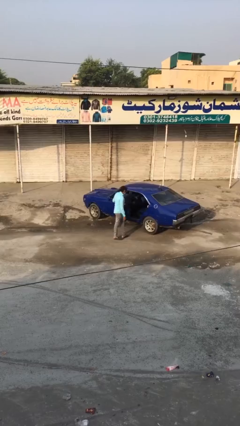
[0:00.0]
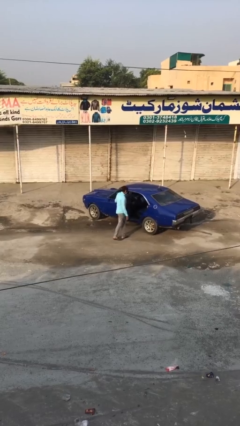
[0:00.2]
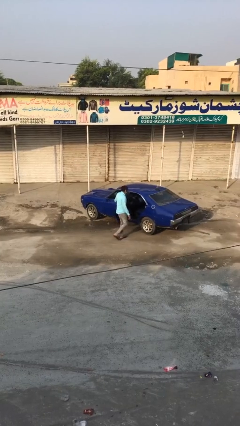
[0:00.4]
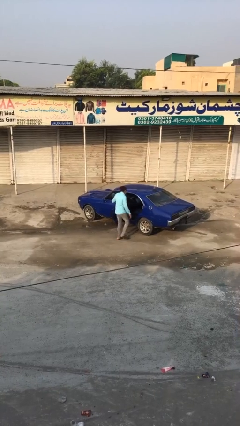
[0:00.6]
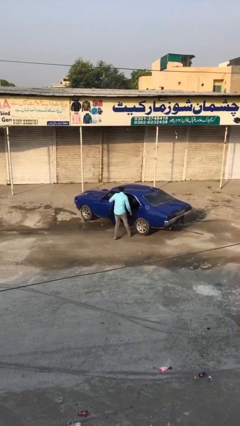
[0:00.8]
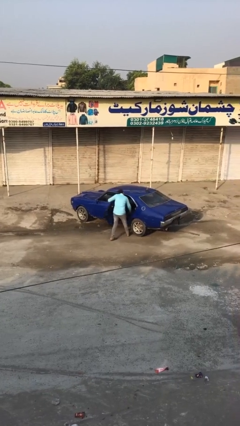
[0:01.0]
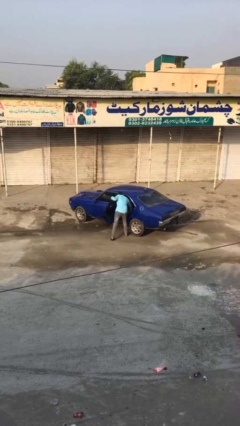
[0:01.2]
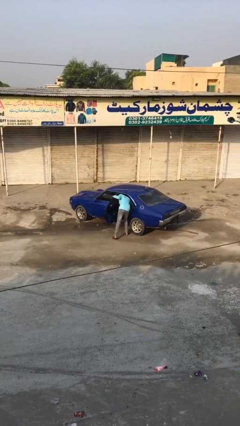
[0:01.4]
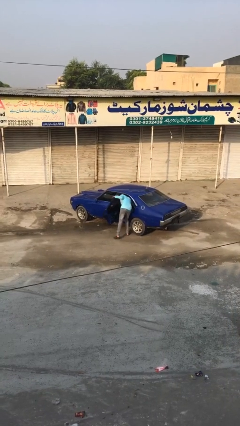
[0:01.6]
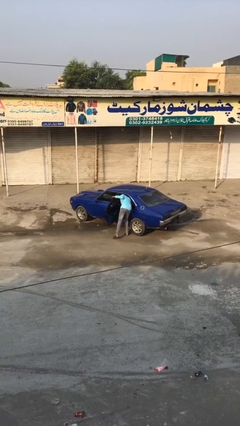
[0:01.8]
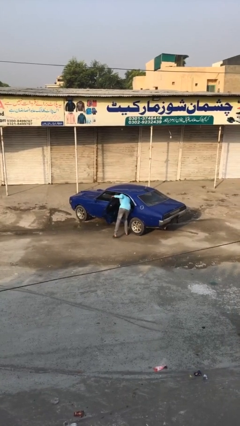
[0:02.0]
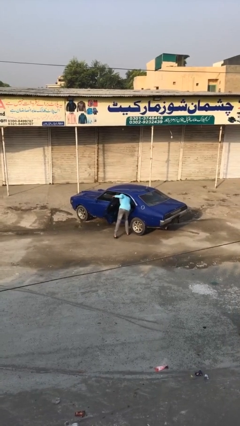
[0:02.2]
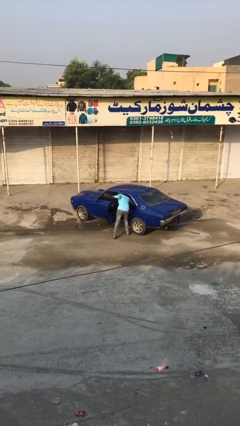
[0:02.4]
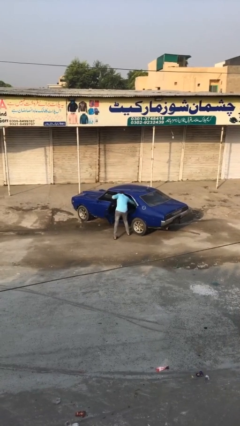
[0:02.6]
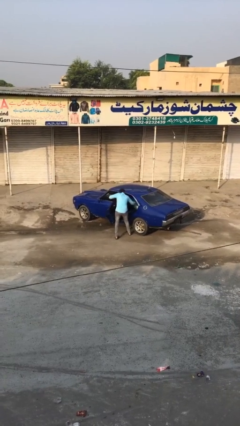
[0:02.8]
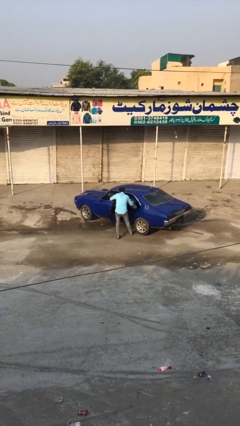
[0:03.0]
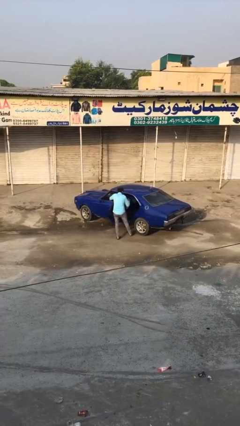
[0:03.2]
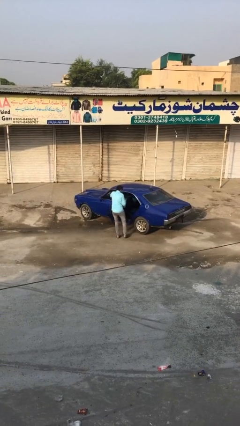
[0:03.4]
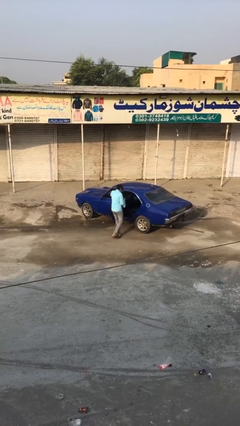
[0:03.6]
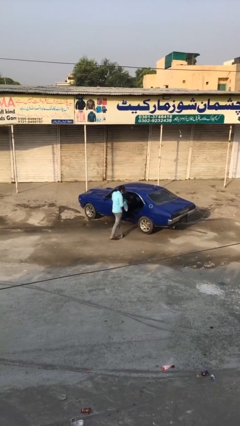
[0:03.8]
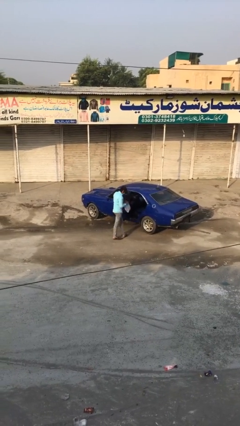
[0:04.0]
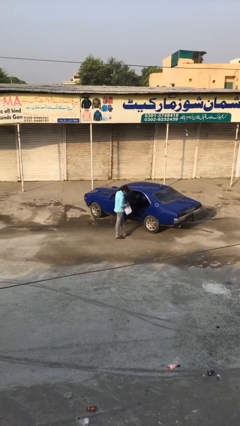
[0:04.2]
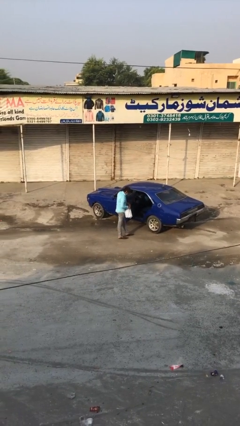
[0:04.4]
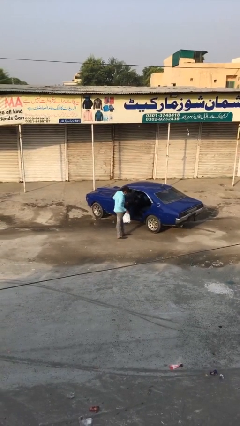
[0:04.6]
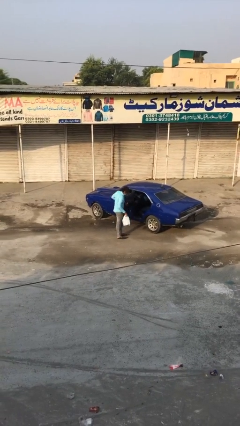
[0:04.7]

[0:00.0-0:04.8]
person unloads car

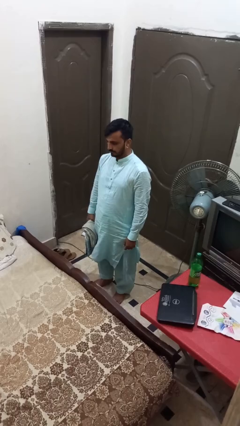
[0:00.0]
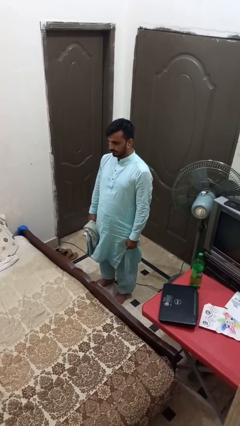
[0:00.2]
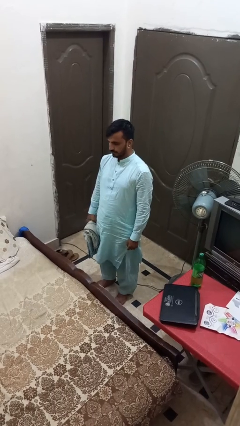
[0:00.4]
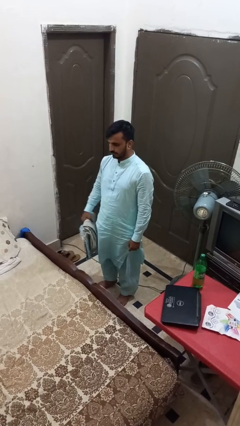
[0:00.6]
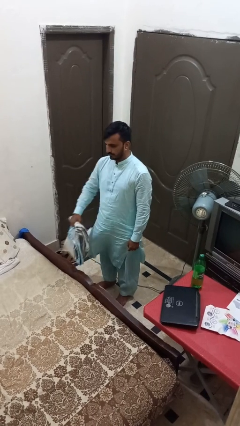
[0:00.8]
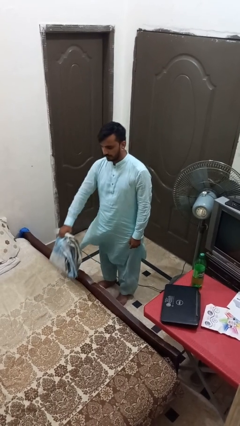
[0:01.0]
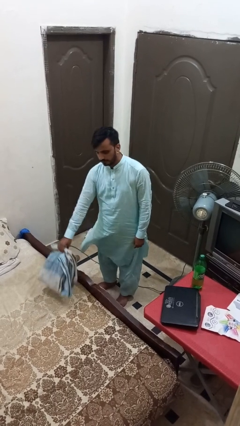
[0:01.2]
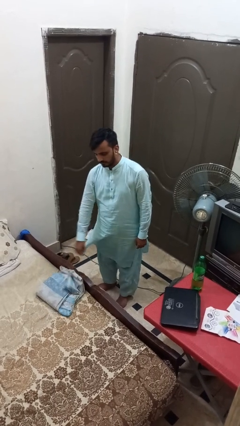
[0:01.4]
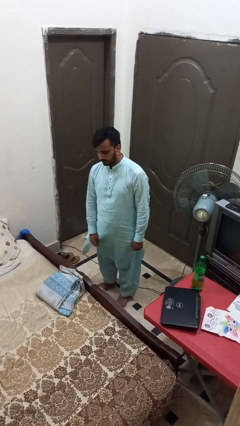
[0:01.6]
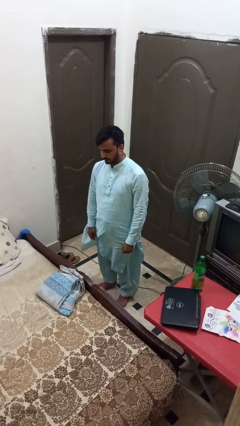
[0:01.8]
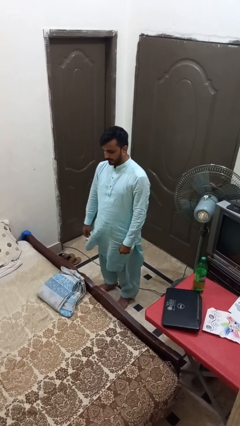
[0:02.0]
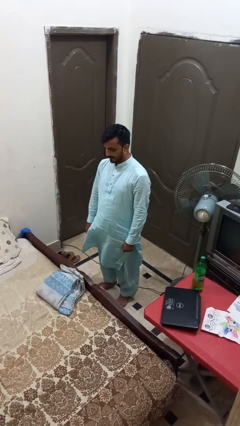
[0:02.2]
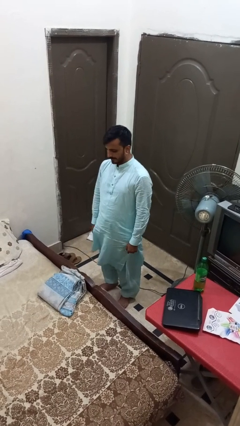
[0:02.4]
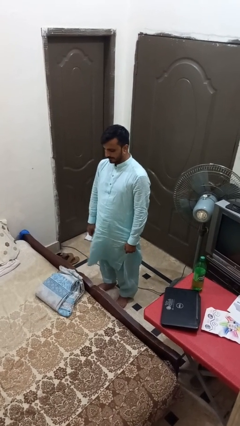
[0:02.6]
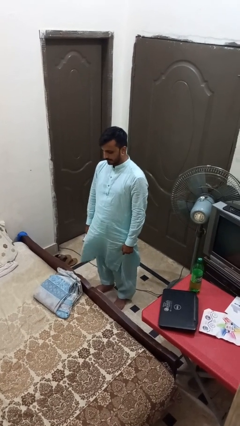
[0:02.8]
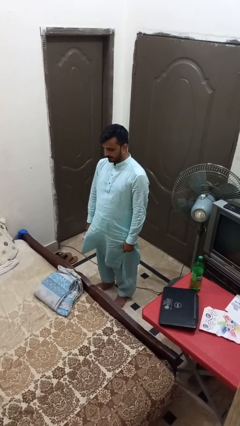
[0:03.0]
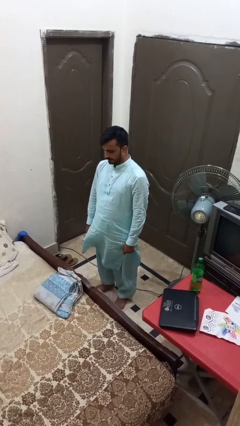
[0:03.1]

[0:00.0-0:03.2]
person puts down object on bed

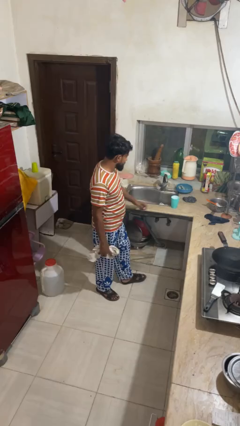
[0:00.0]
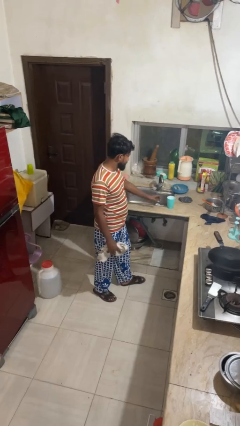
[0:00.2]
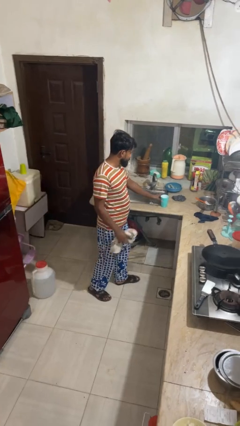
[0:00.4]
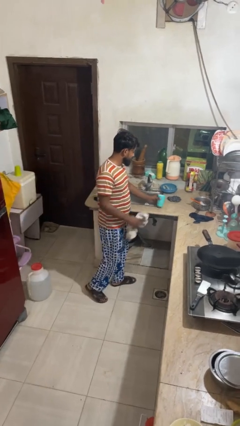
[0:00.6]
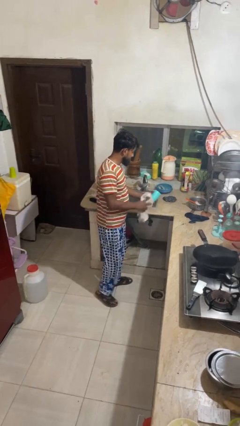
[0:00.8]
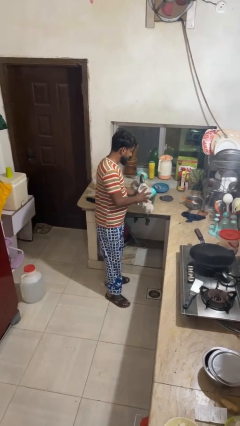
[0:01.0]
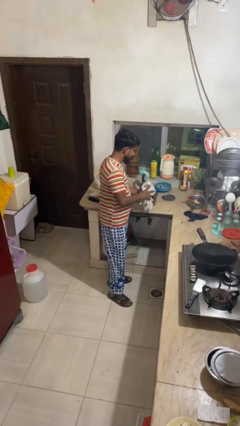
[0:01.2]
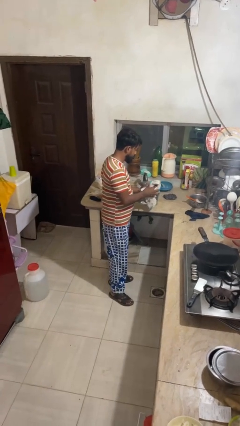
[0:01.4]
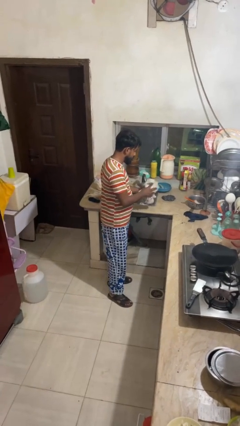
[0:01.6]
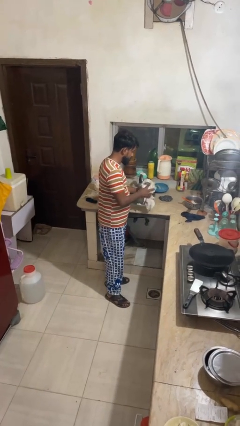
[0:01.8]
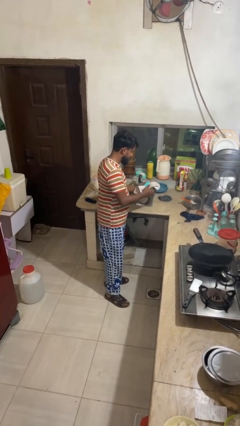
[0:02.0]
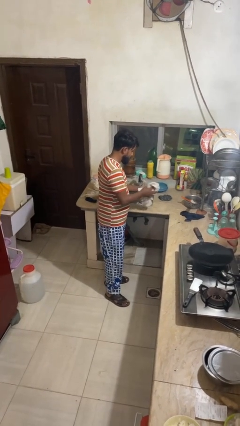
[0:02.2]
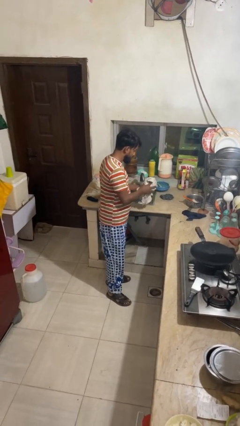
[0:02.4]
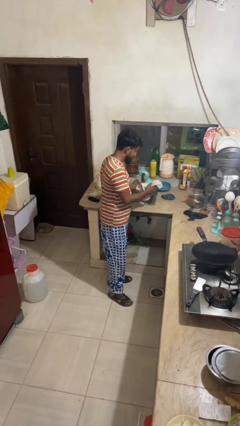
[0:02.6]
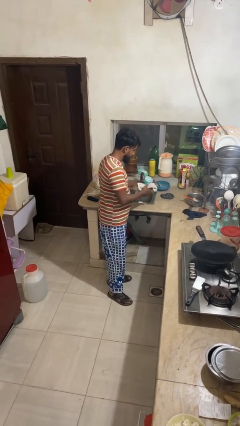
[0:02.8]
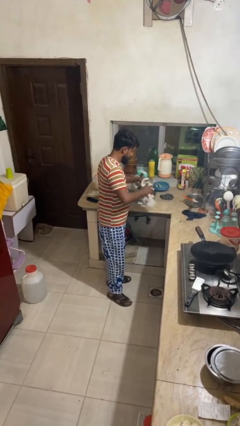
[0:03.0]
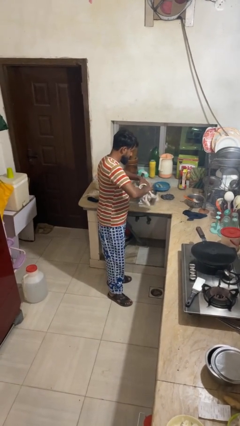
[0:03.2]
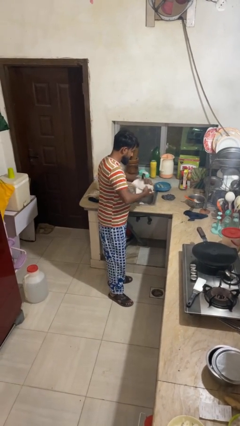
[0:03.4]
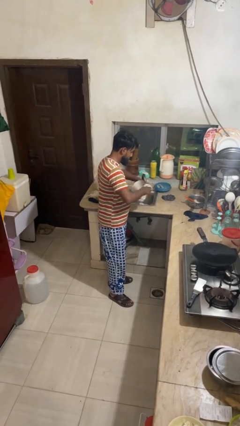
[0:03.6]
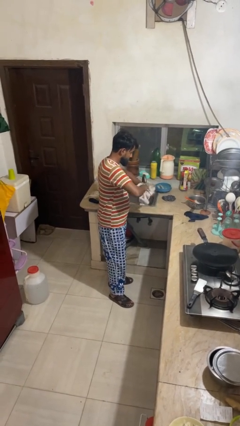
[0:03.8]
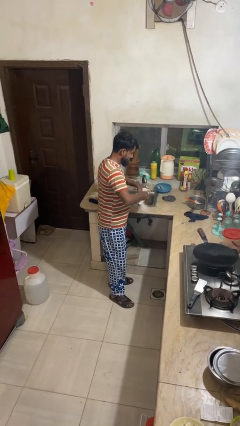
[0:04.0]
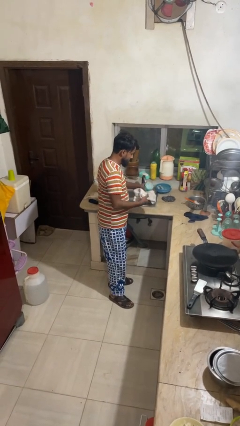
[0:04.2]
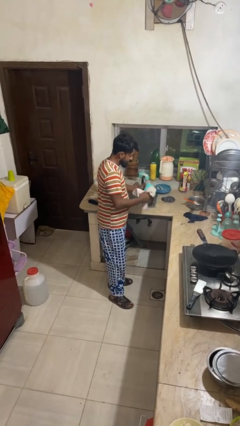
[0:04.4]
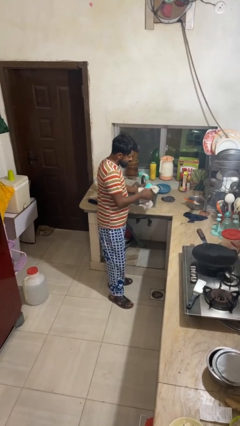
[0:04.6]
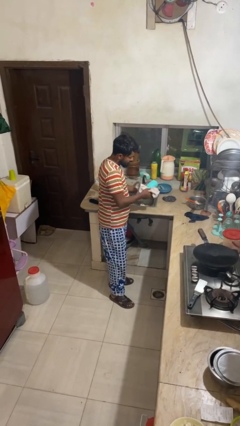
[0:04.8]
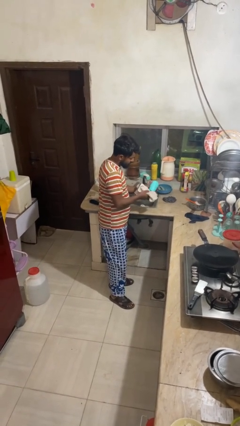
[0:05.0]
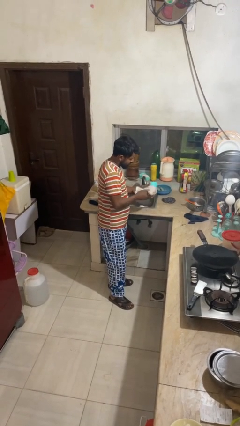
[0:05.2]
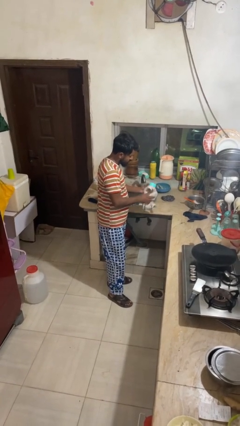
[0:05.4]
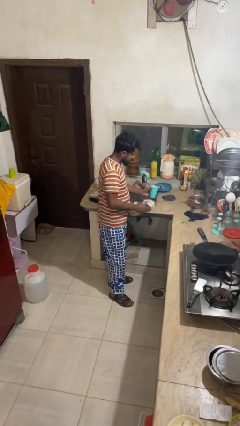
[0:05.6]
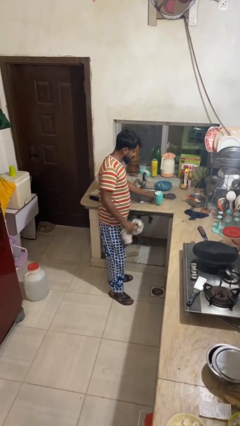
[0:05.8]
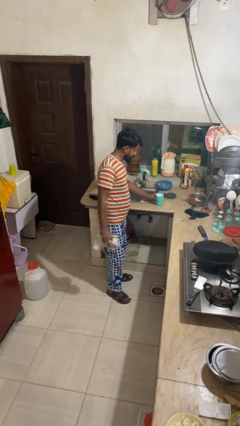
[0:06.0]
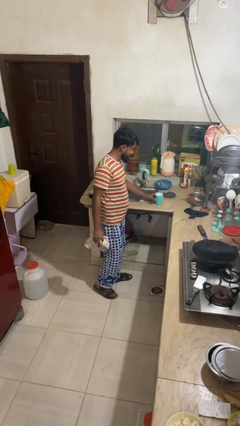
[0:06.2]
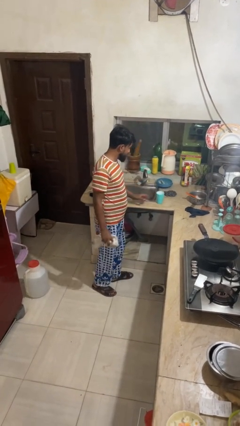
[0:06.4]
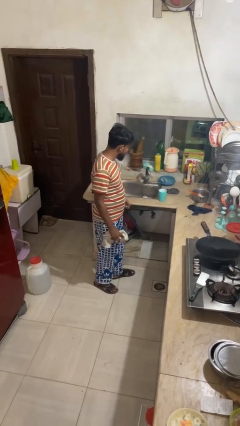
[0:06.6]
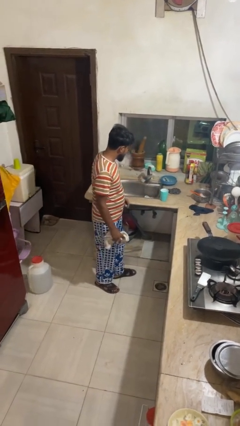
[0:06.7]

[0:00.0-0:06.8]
person dries dish

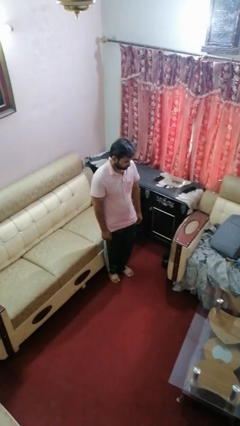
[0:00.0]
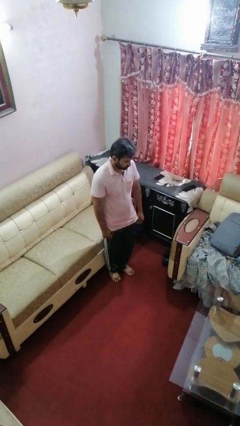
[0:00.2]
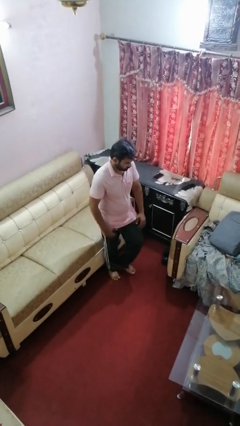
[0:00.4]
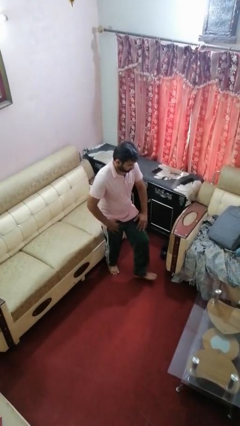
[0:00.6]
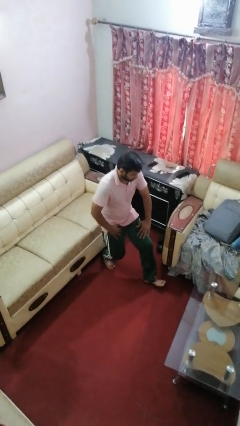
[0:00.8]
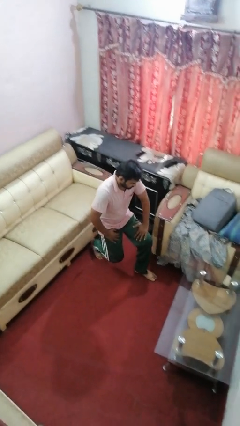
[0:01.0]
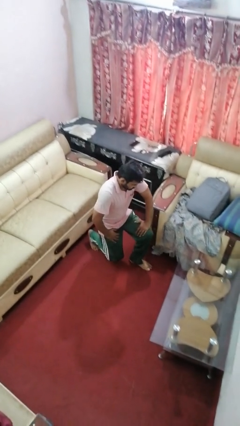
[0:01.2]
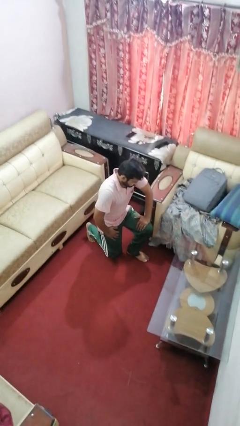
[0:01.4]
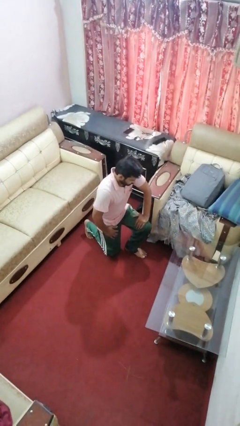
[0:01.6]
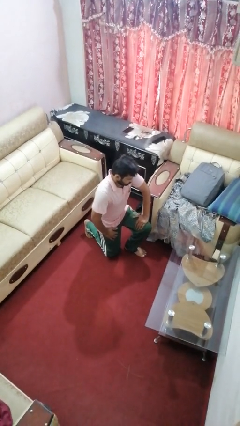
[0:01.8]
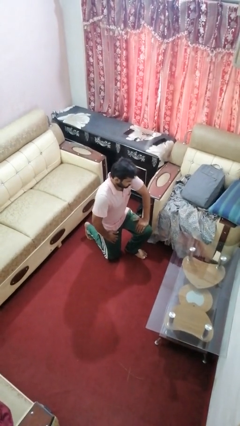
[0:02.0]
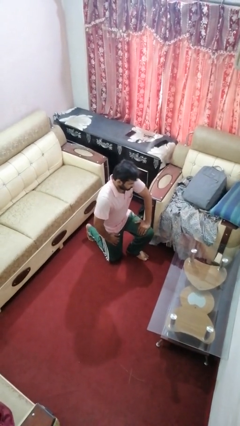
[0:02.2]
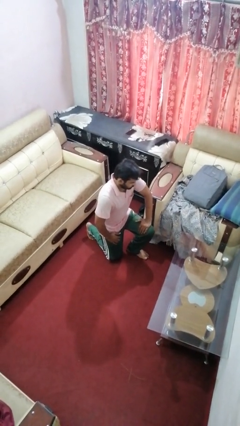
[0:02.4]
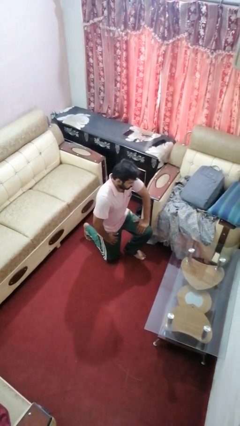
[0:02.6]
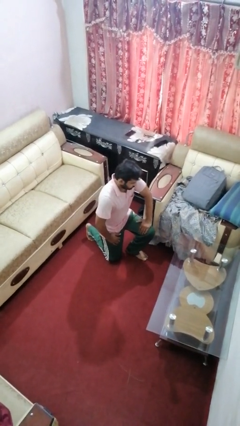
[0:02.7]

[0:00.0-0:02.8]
person kneels

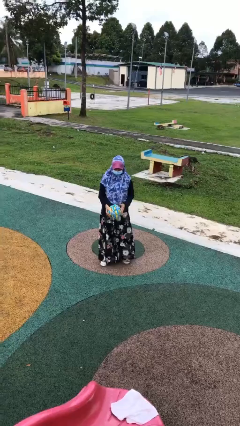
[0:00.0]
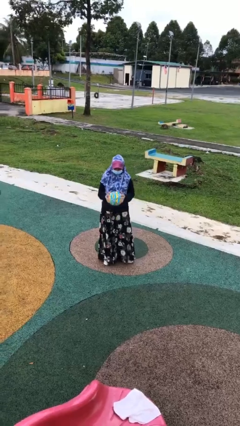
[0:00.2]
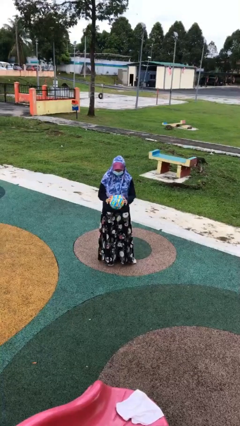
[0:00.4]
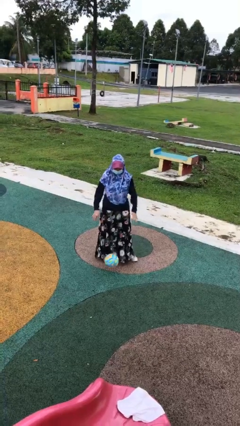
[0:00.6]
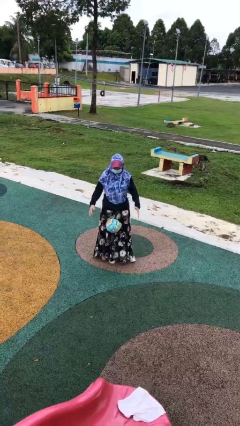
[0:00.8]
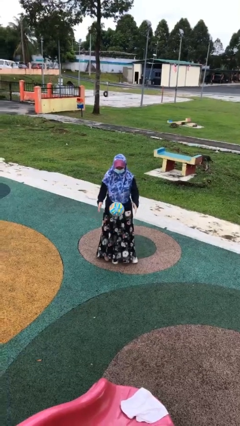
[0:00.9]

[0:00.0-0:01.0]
person bounces ball on floor
